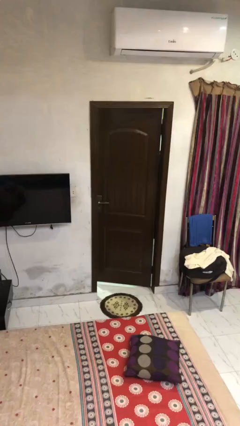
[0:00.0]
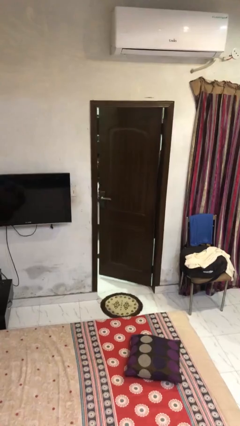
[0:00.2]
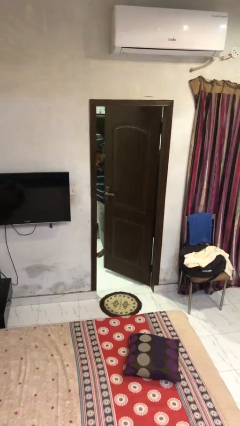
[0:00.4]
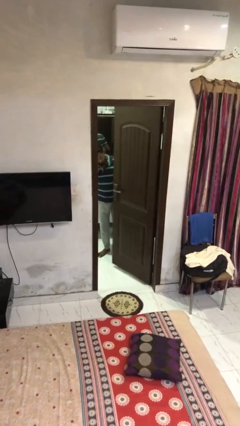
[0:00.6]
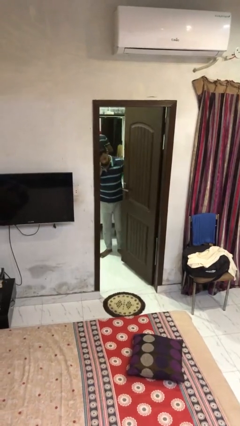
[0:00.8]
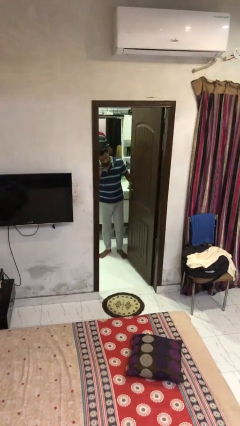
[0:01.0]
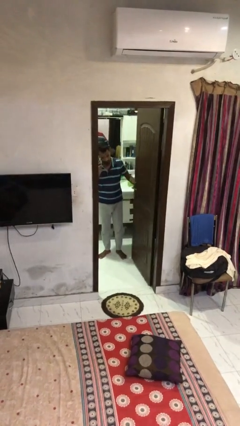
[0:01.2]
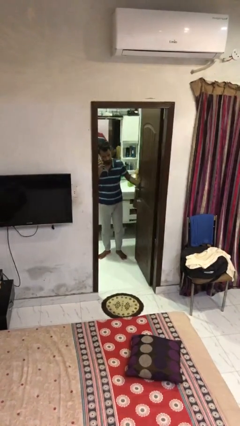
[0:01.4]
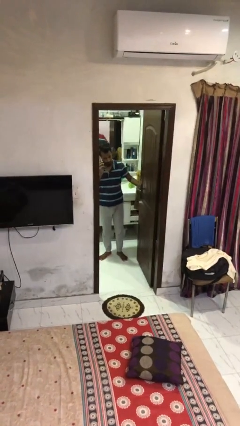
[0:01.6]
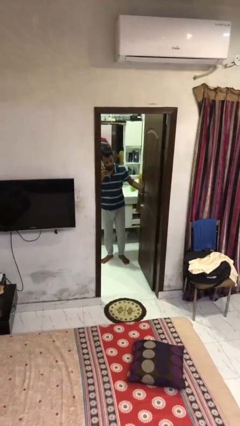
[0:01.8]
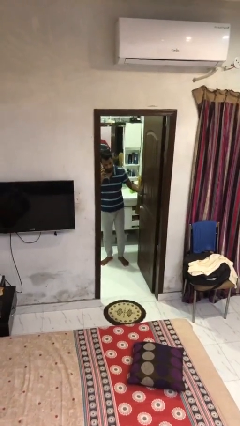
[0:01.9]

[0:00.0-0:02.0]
person opens facility door

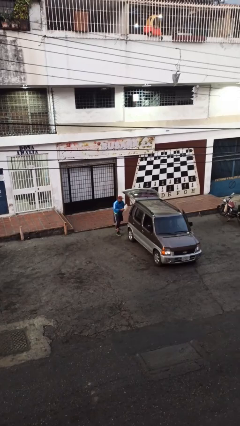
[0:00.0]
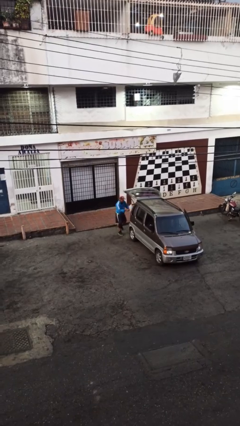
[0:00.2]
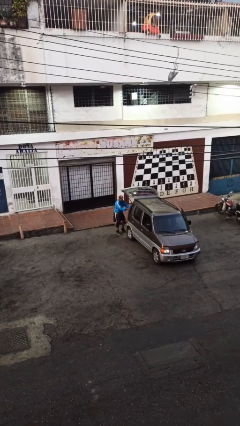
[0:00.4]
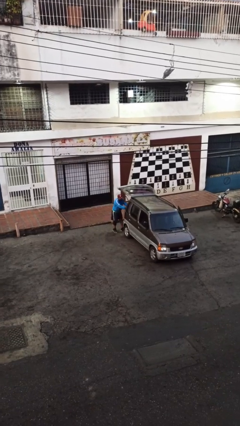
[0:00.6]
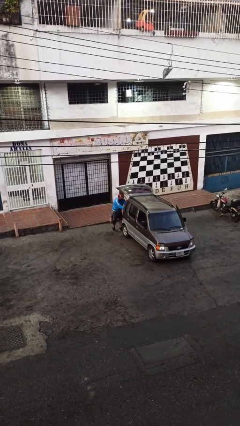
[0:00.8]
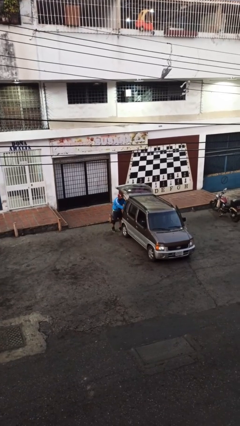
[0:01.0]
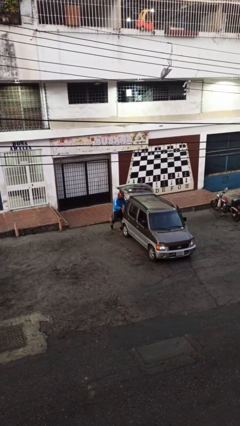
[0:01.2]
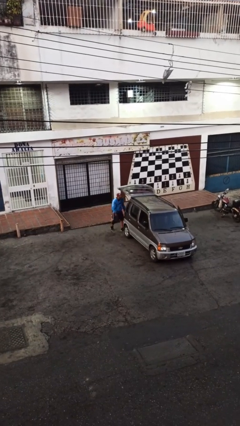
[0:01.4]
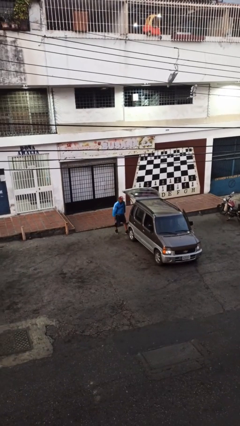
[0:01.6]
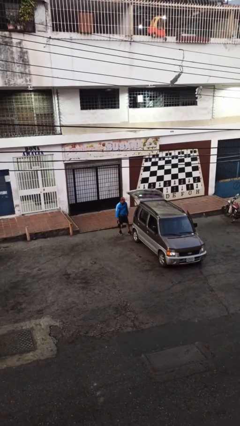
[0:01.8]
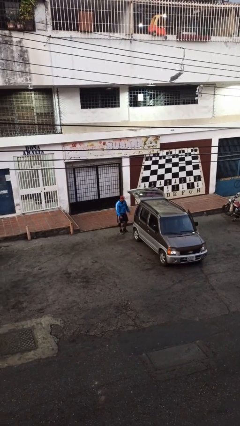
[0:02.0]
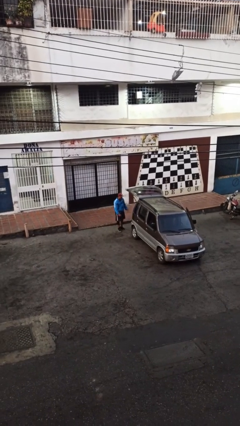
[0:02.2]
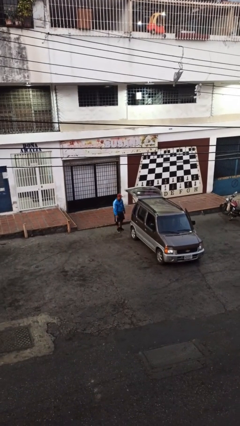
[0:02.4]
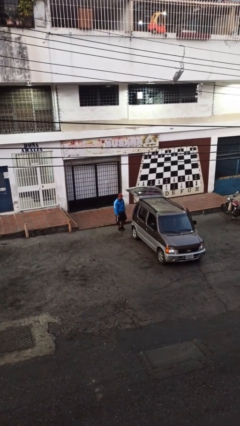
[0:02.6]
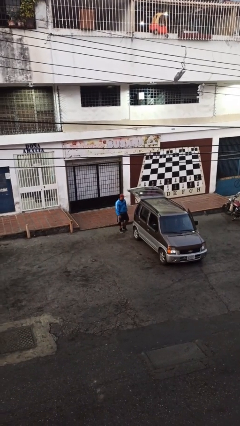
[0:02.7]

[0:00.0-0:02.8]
person loads car

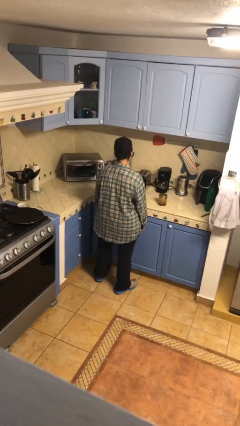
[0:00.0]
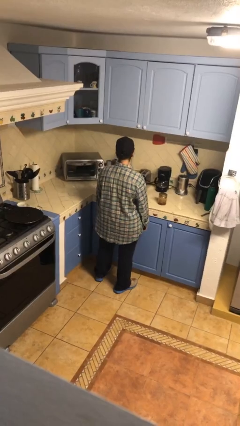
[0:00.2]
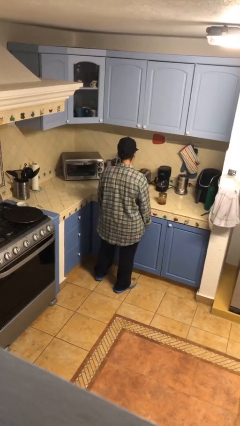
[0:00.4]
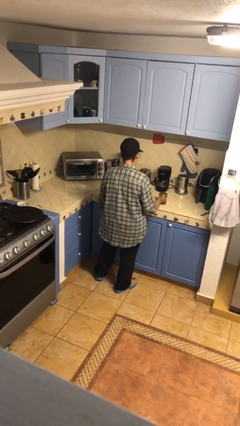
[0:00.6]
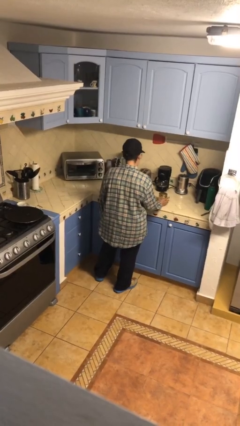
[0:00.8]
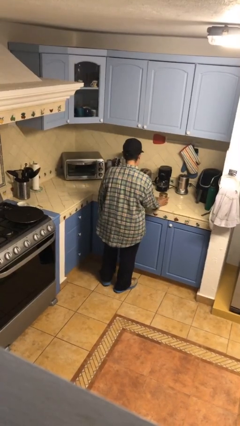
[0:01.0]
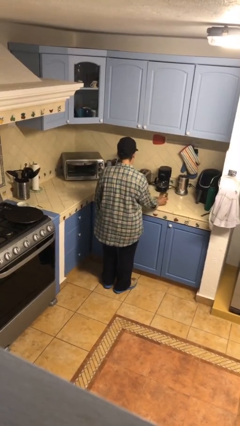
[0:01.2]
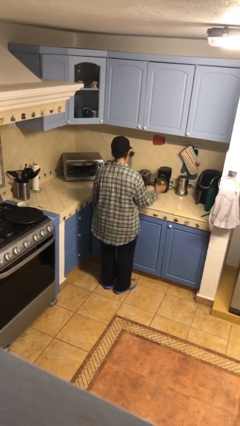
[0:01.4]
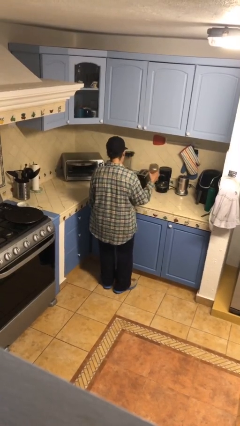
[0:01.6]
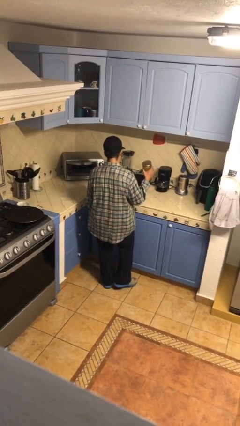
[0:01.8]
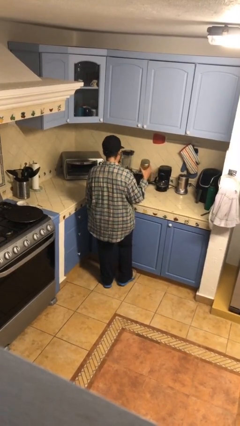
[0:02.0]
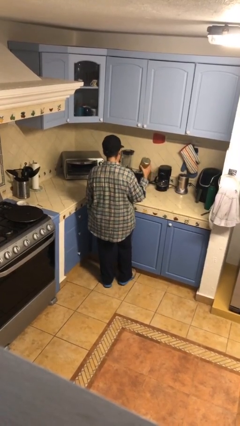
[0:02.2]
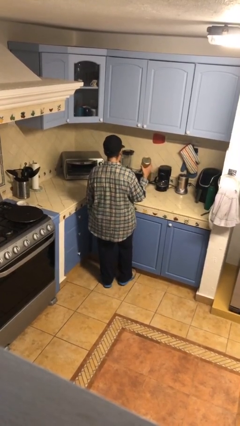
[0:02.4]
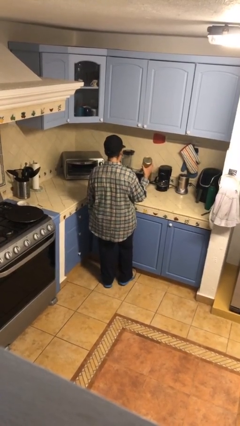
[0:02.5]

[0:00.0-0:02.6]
person picks up object from countertop

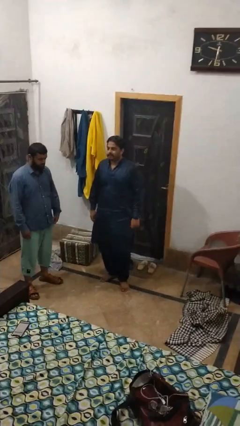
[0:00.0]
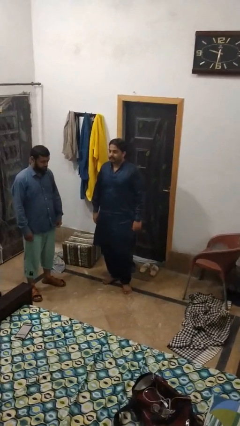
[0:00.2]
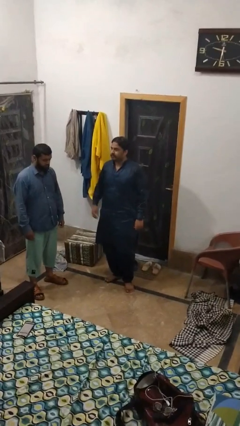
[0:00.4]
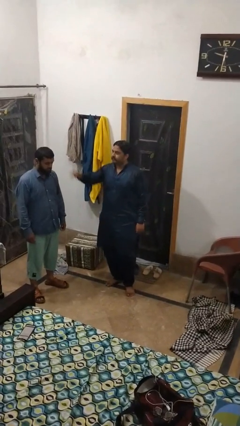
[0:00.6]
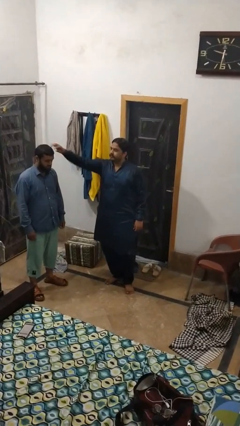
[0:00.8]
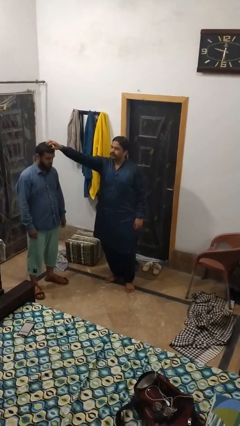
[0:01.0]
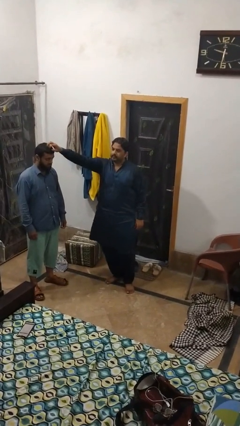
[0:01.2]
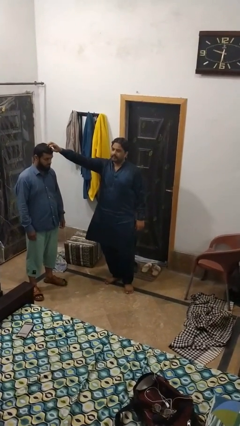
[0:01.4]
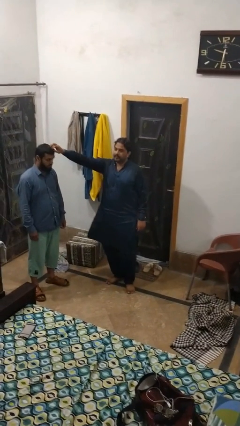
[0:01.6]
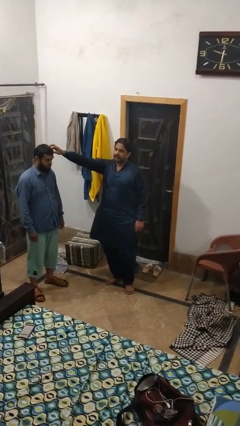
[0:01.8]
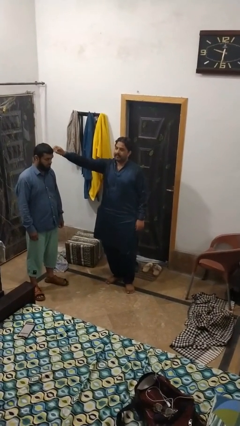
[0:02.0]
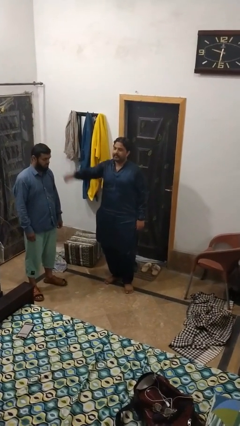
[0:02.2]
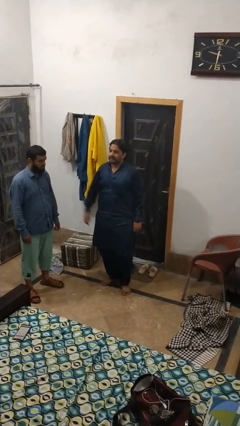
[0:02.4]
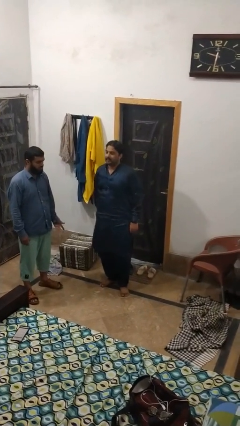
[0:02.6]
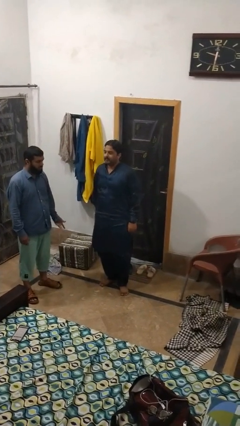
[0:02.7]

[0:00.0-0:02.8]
person grabs person by hair

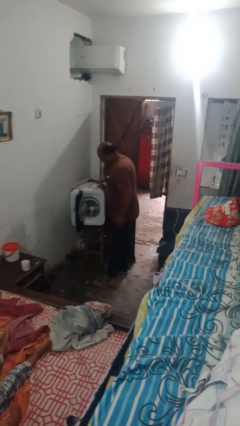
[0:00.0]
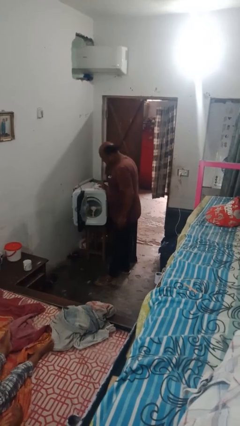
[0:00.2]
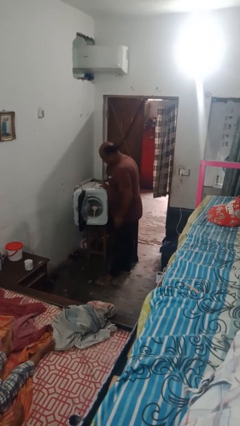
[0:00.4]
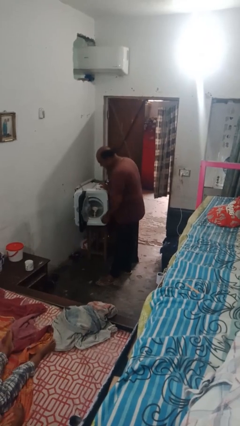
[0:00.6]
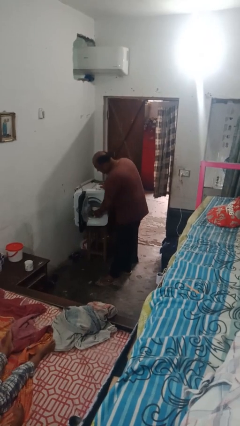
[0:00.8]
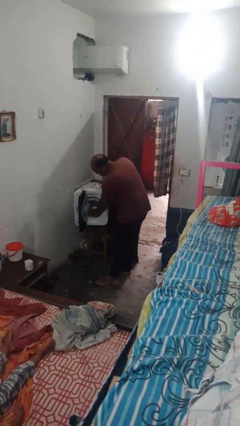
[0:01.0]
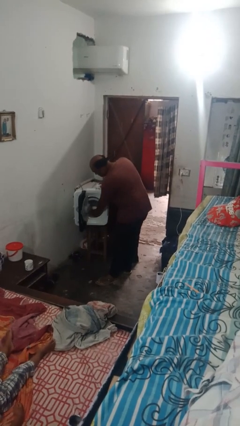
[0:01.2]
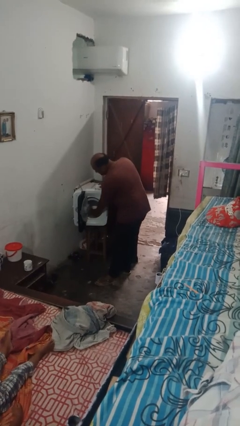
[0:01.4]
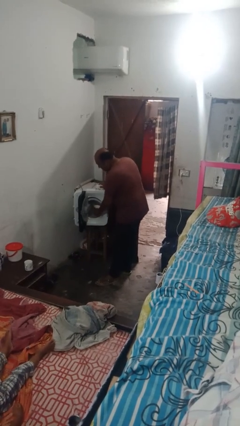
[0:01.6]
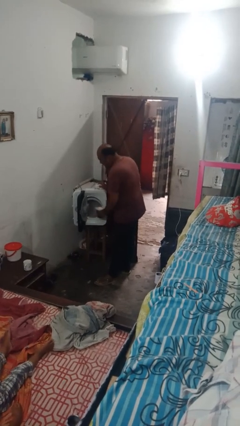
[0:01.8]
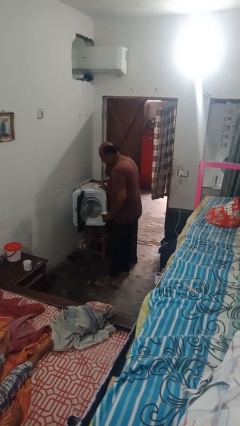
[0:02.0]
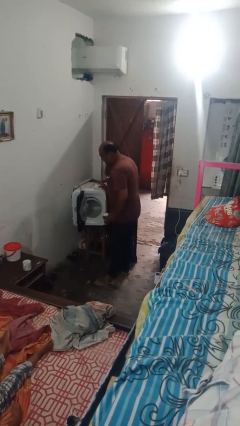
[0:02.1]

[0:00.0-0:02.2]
person unloads dishwasher

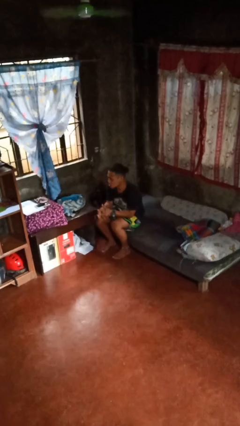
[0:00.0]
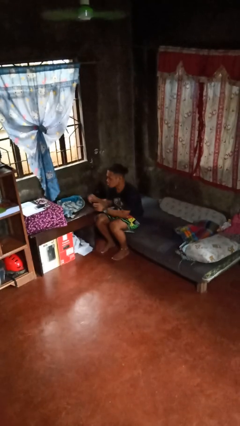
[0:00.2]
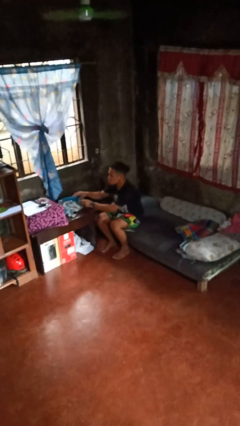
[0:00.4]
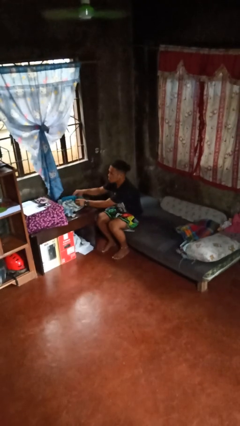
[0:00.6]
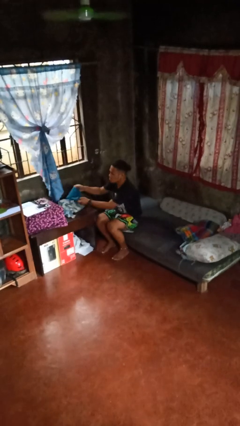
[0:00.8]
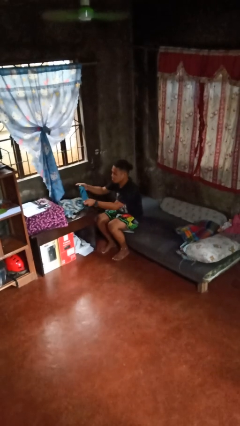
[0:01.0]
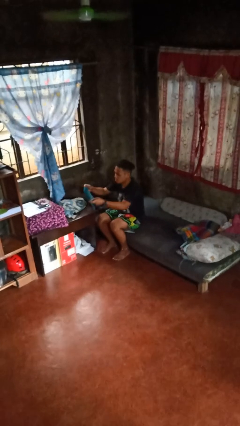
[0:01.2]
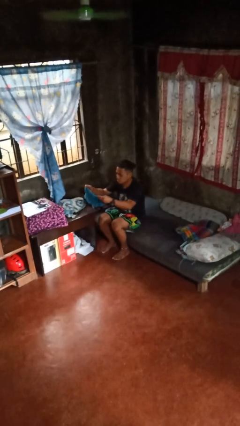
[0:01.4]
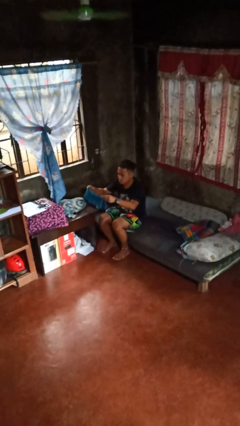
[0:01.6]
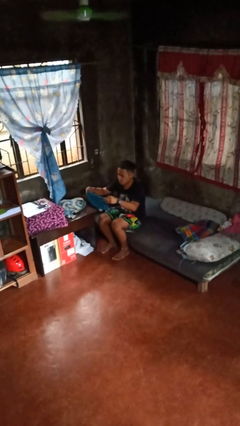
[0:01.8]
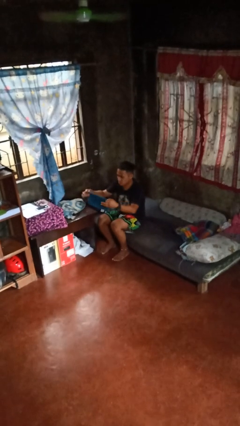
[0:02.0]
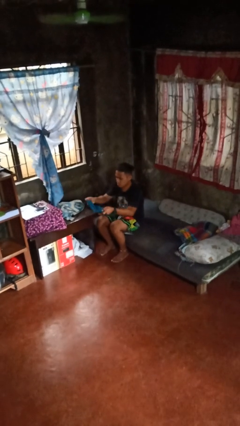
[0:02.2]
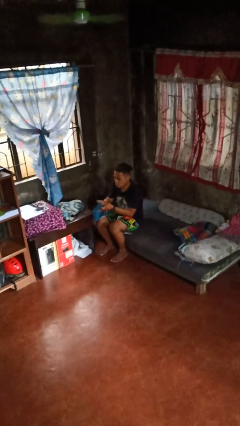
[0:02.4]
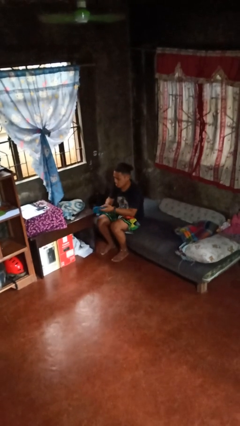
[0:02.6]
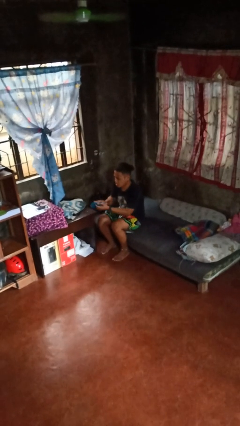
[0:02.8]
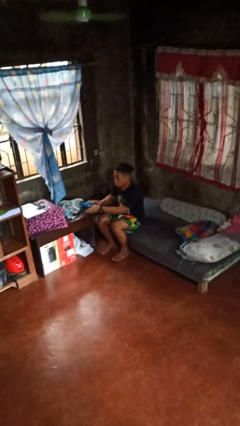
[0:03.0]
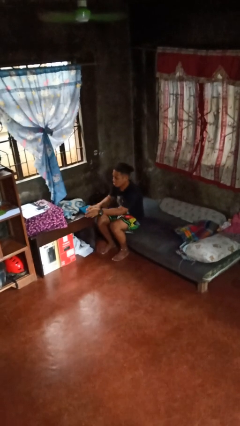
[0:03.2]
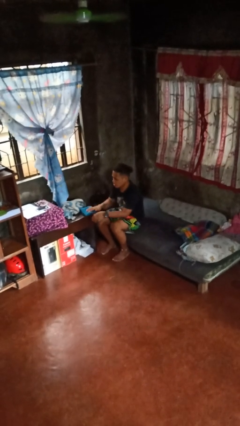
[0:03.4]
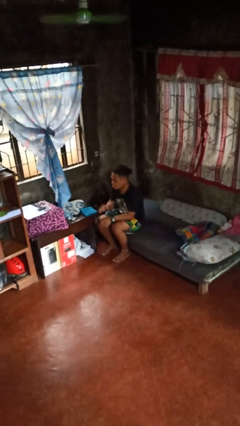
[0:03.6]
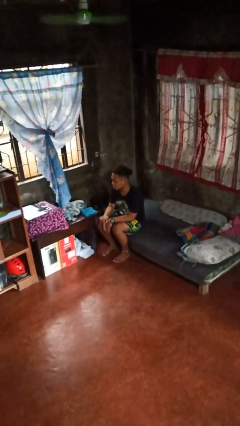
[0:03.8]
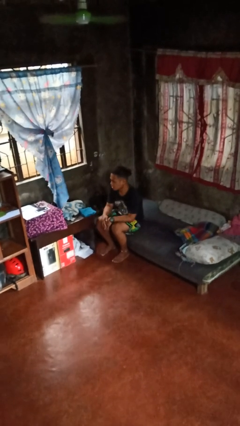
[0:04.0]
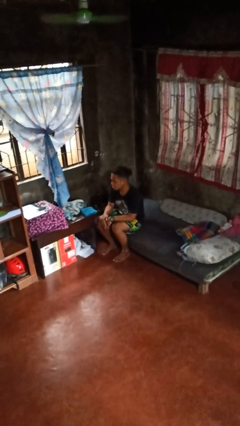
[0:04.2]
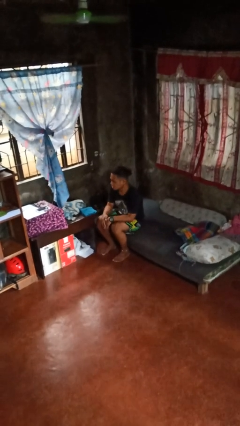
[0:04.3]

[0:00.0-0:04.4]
person folds towel

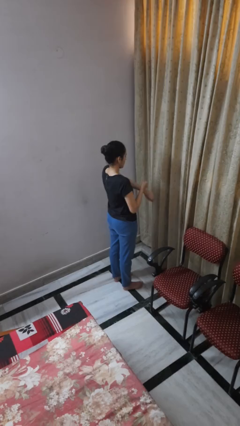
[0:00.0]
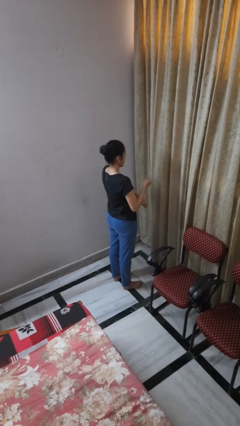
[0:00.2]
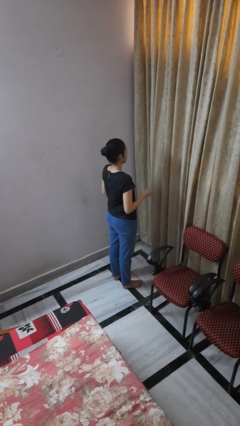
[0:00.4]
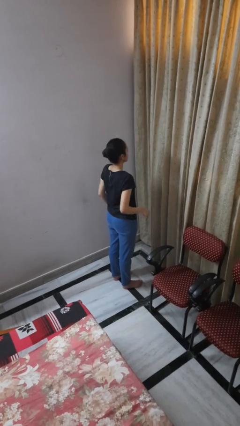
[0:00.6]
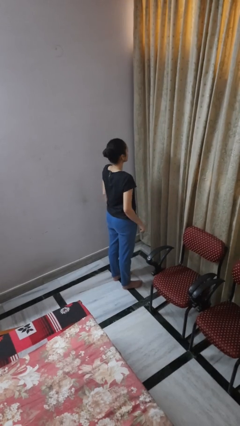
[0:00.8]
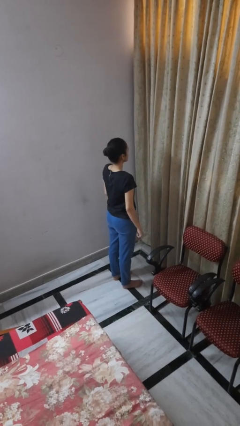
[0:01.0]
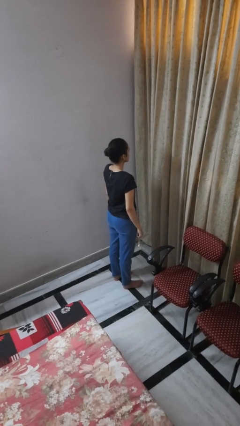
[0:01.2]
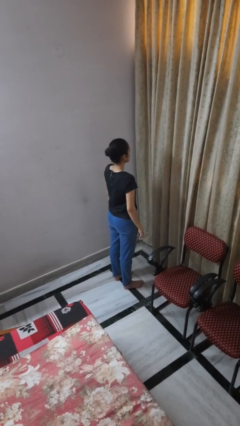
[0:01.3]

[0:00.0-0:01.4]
person takes off wristwatch
